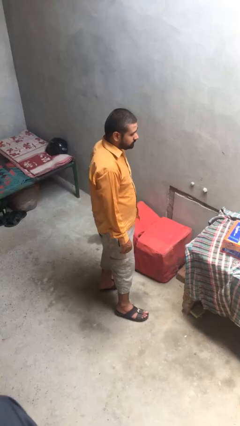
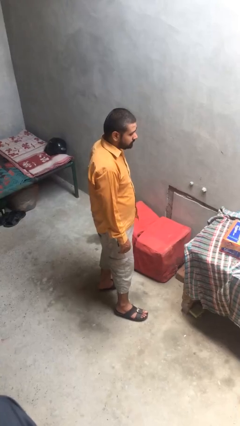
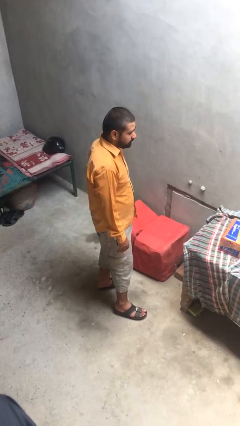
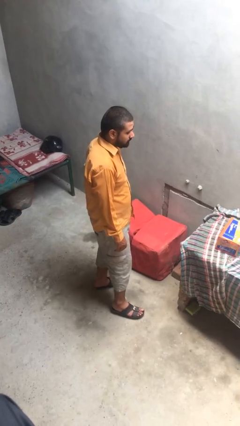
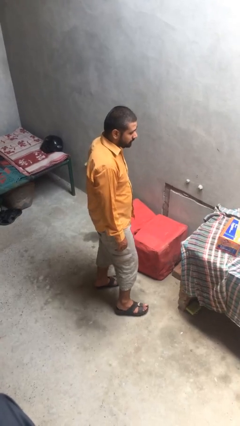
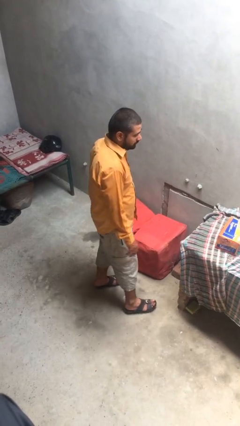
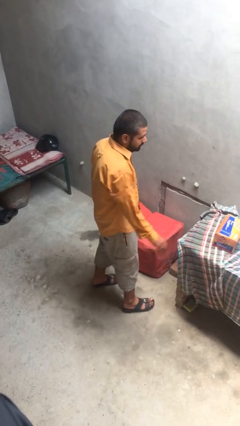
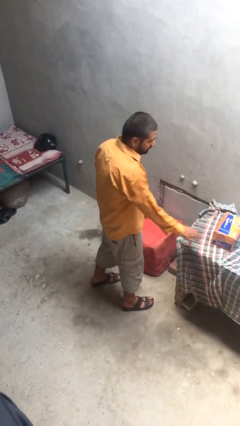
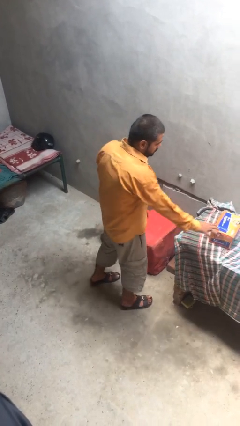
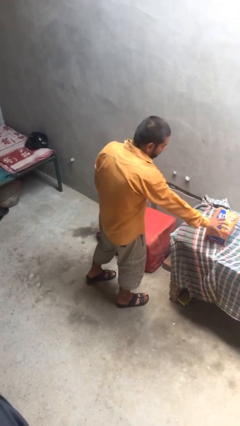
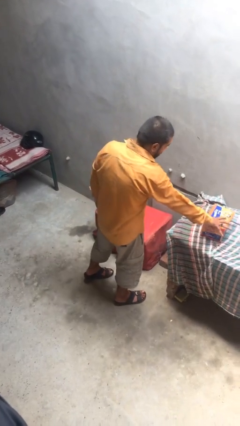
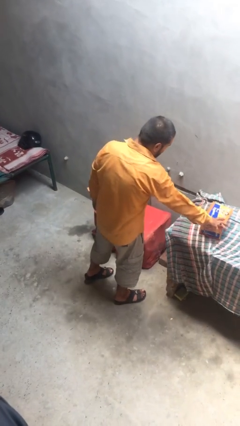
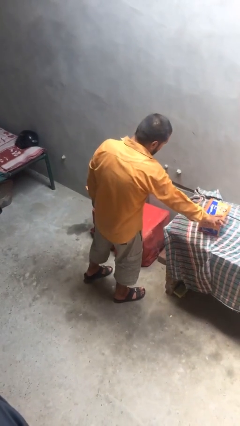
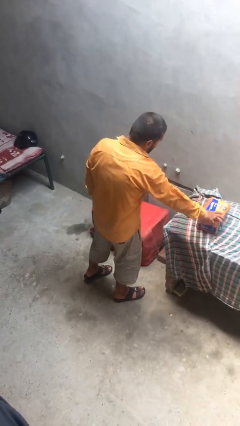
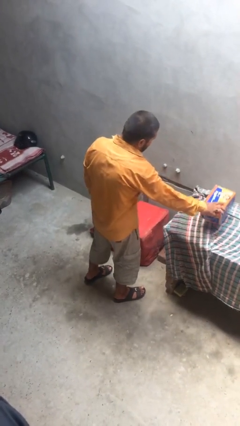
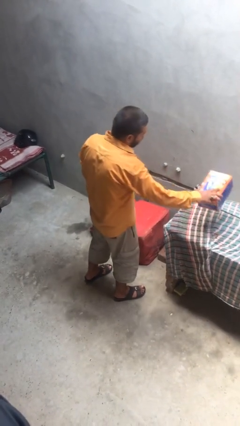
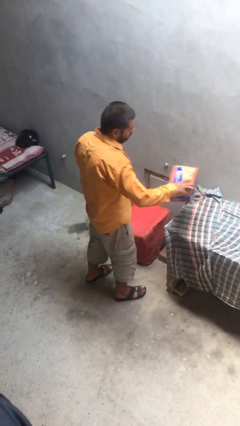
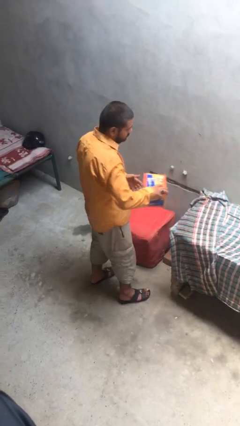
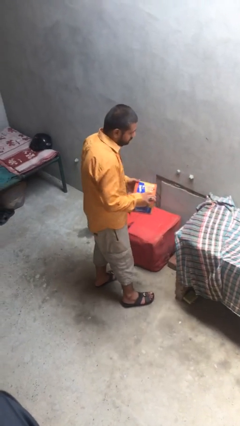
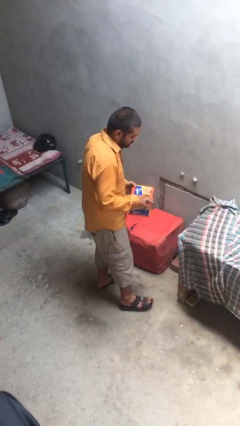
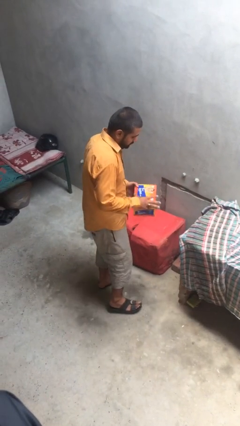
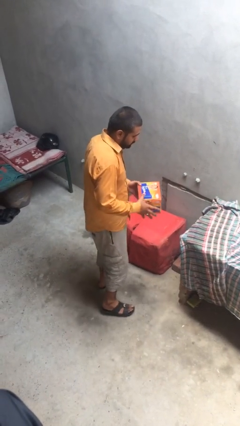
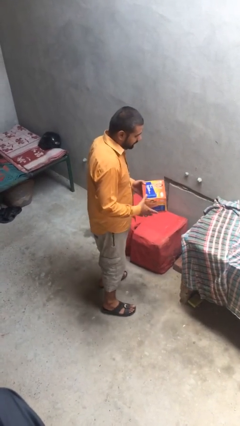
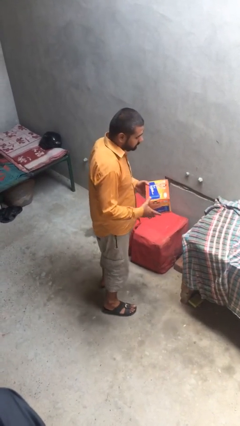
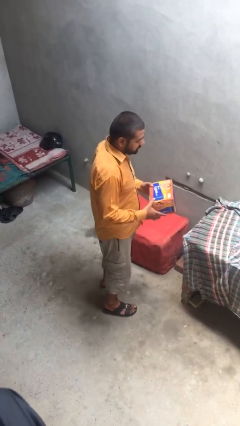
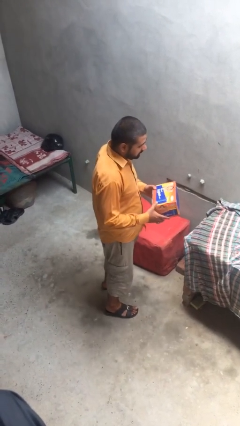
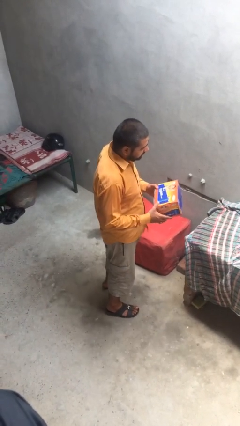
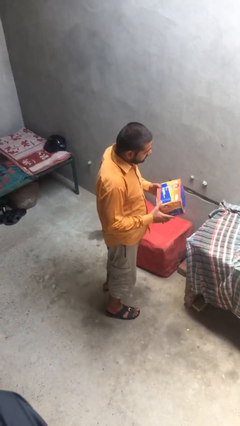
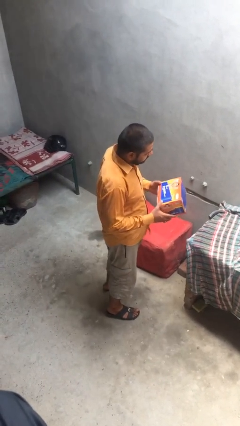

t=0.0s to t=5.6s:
person picks up object from shelf

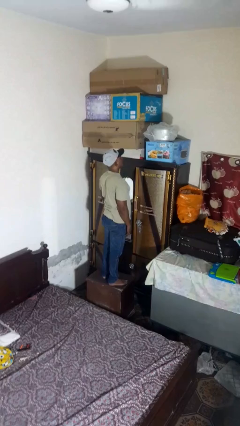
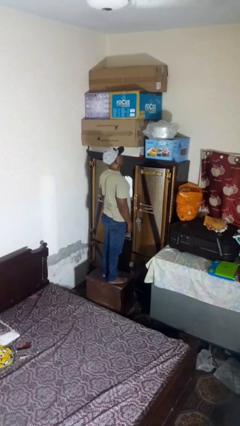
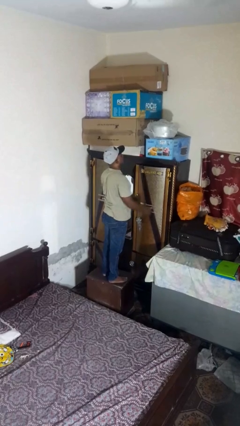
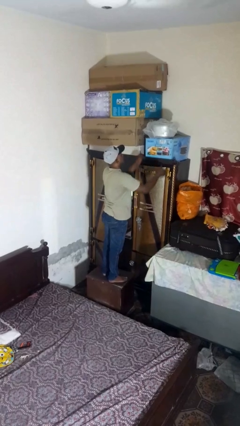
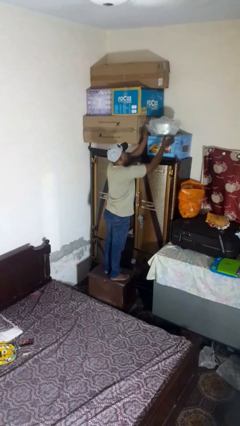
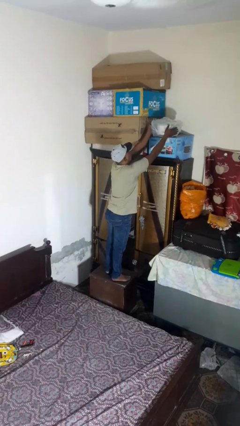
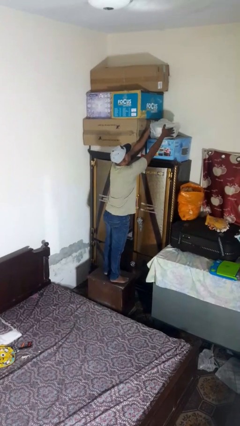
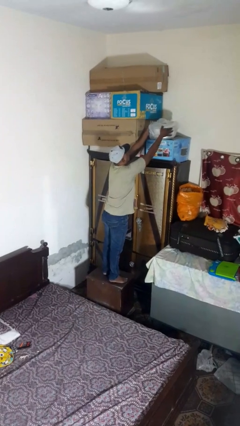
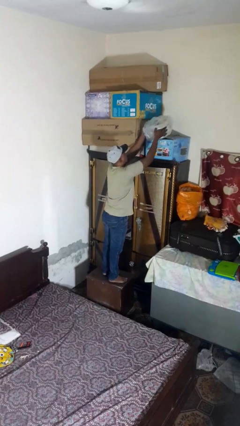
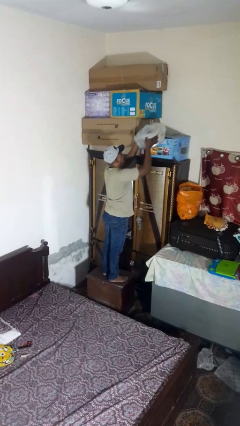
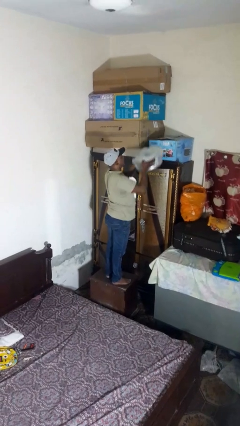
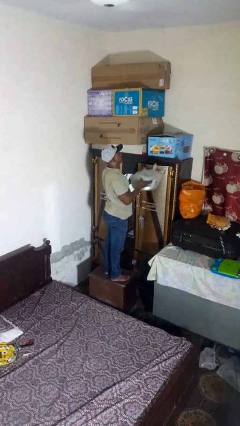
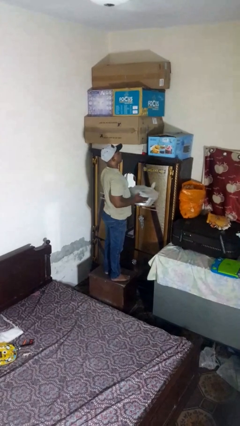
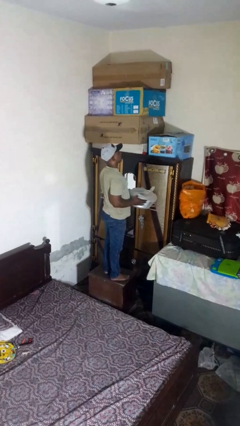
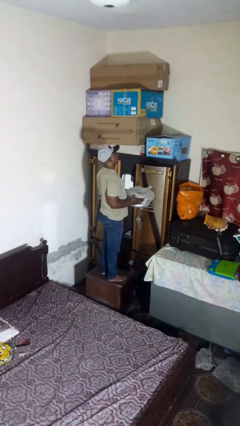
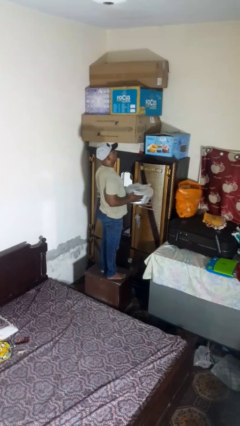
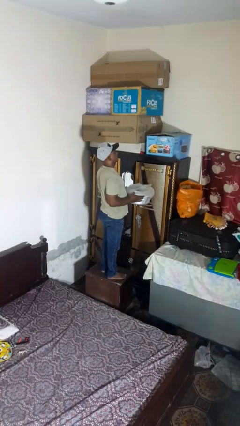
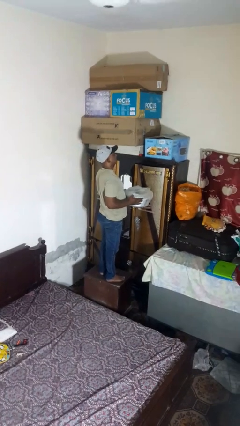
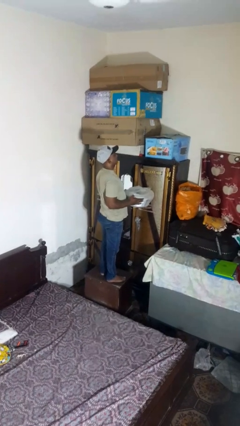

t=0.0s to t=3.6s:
person puts down object on shelf

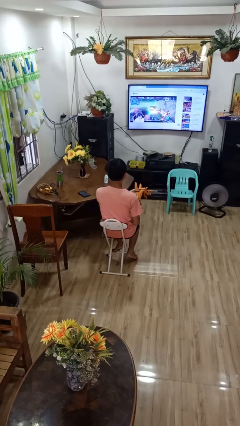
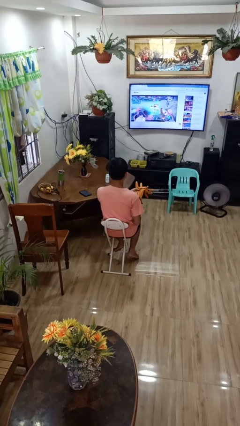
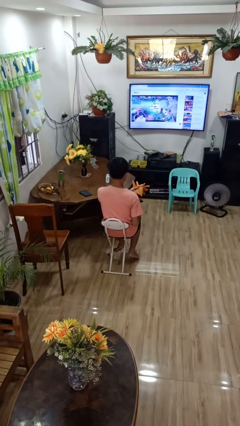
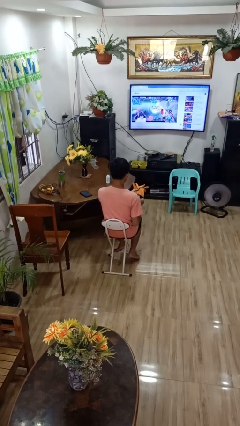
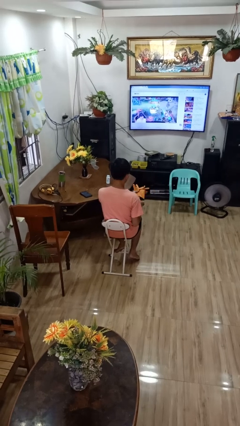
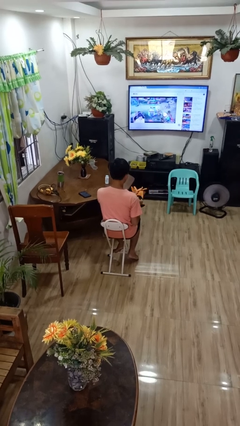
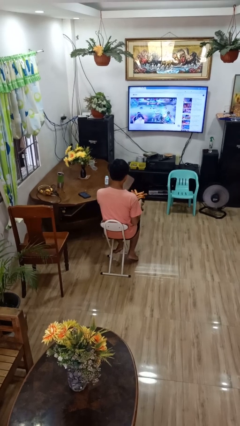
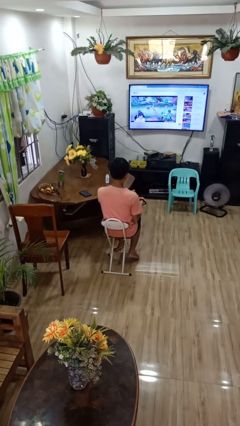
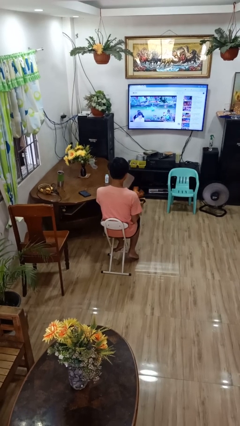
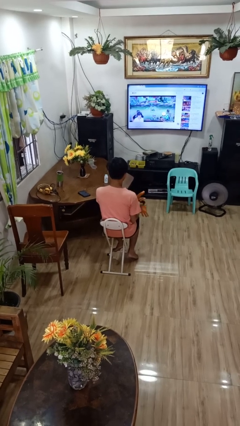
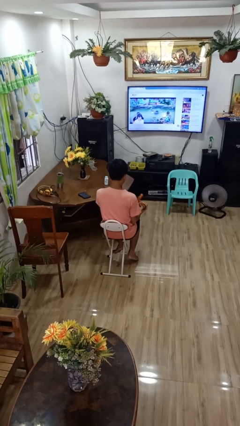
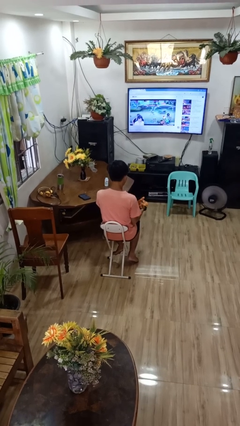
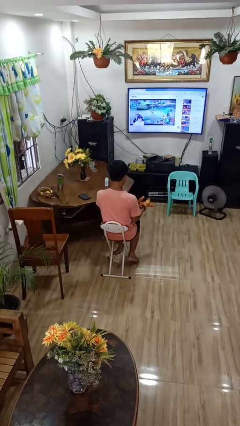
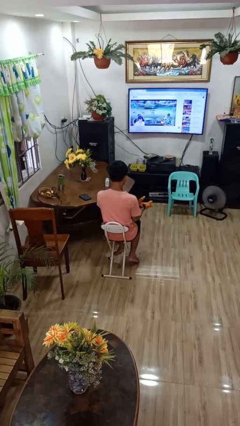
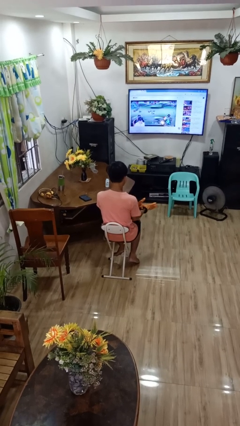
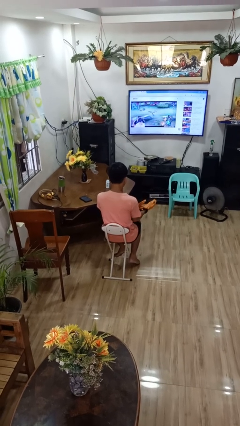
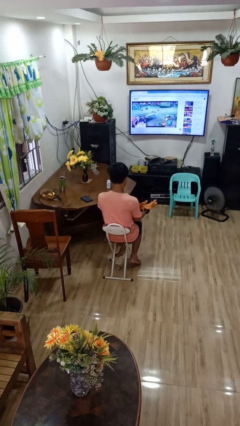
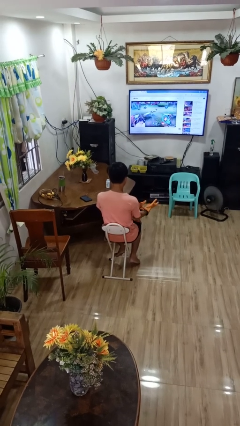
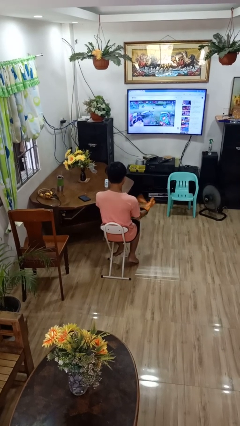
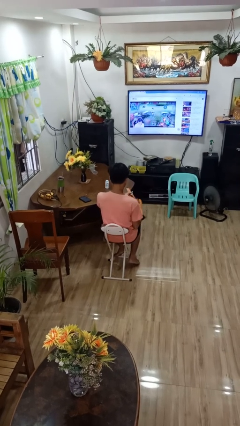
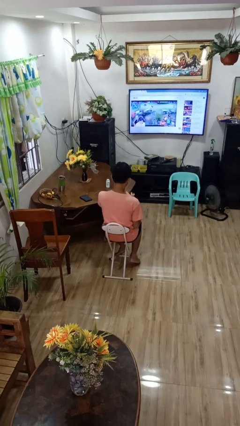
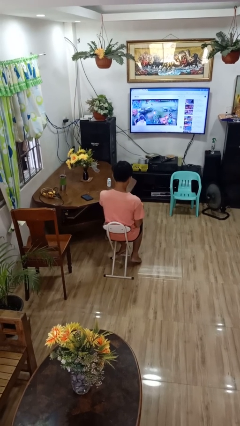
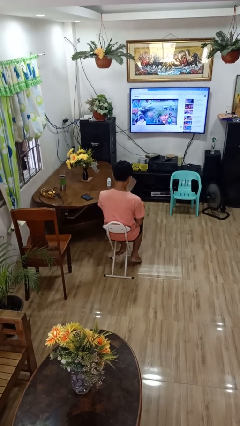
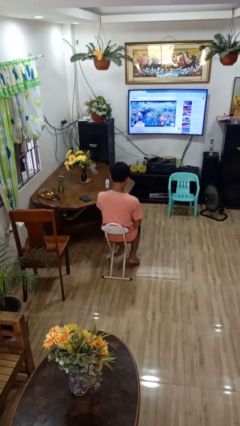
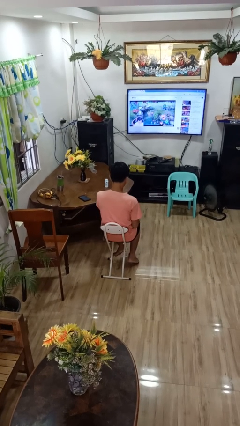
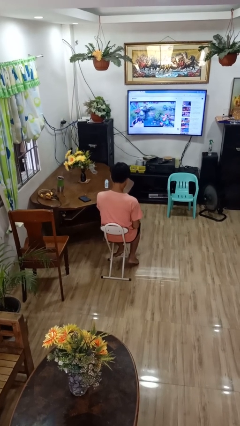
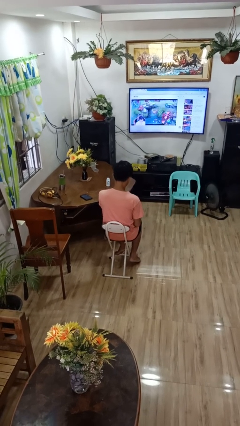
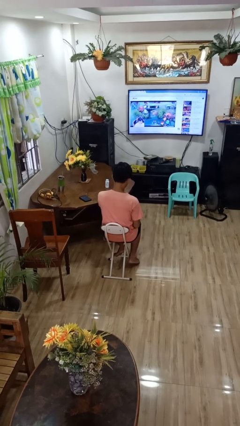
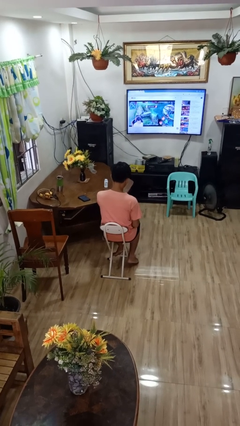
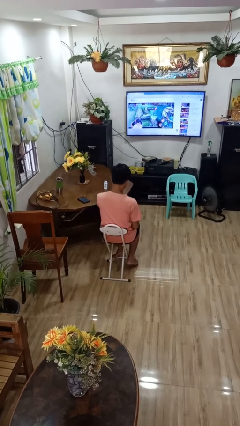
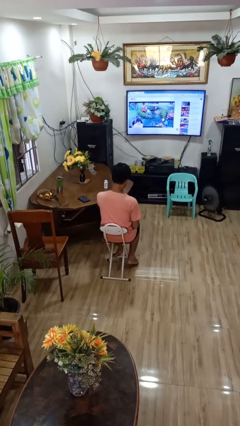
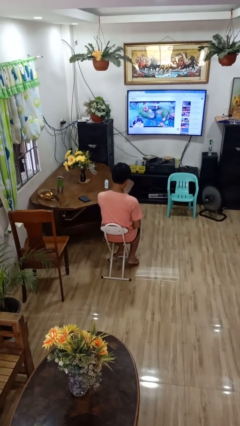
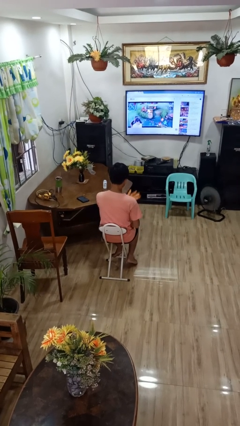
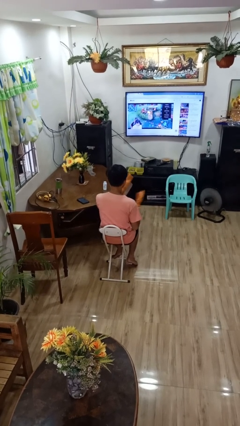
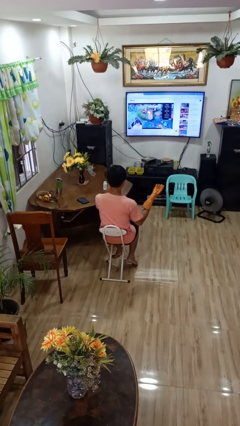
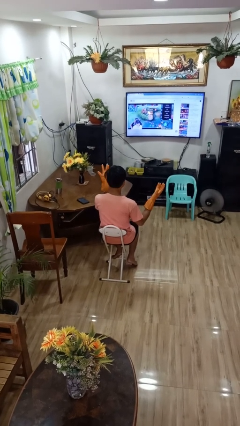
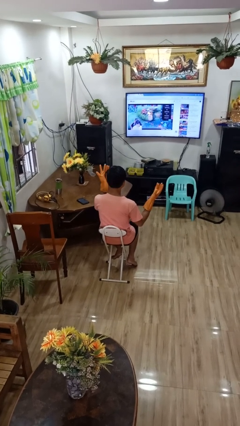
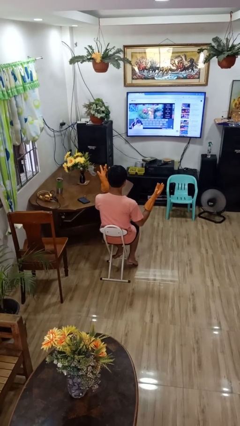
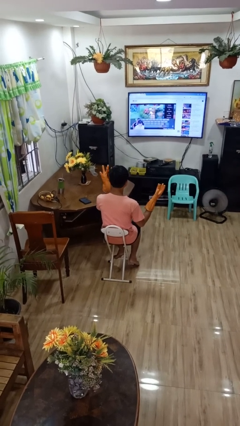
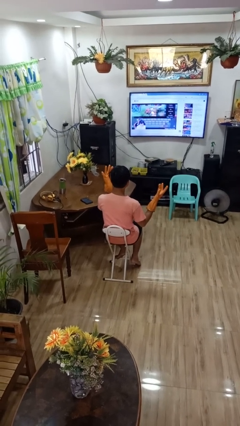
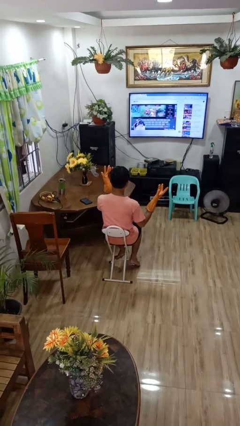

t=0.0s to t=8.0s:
person puts on gloves

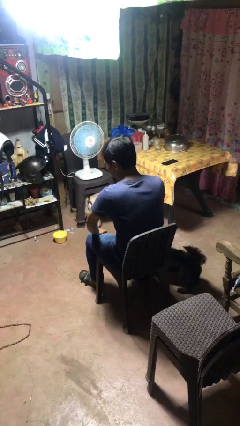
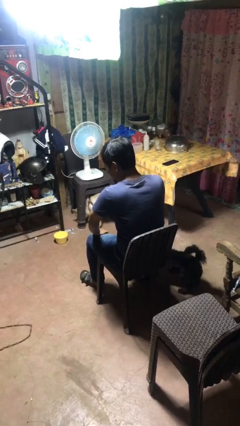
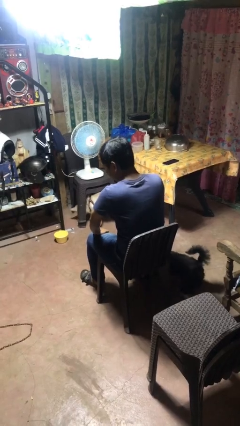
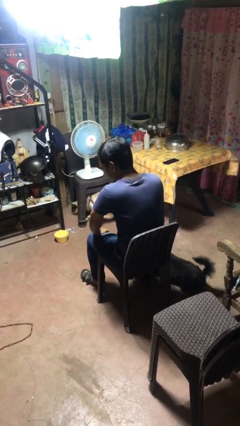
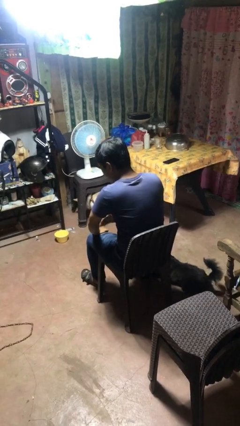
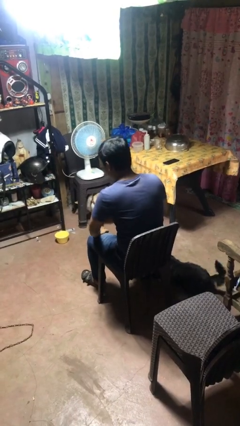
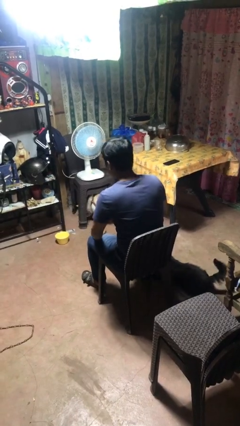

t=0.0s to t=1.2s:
person swats bug
